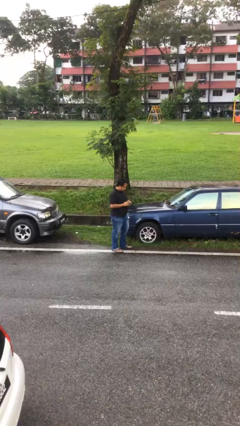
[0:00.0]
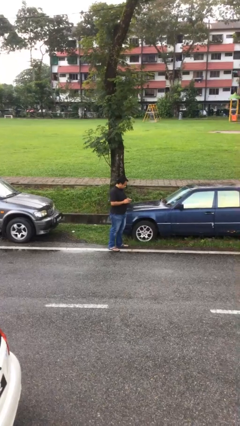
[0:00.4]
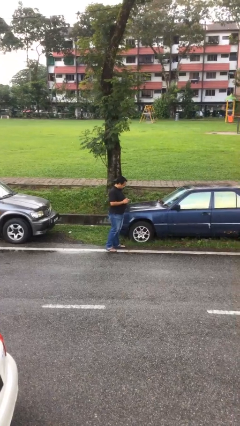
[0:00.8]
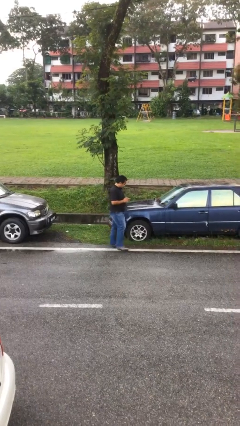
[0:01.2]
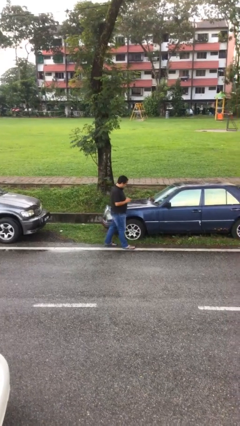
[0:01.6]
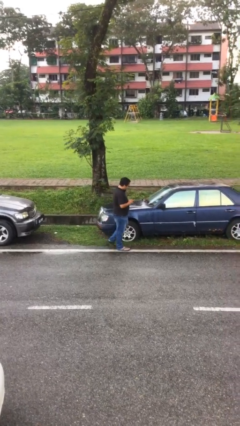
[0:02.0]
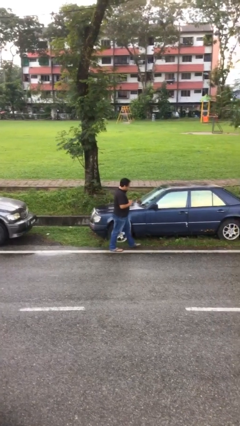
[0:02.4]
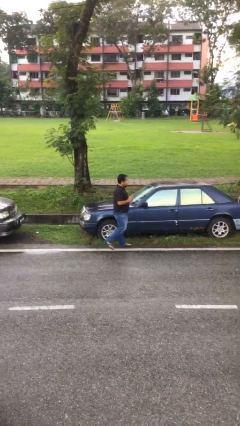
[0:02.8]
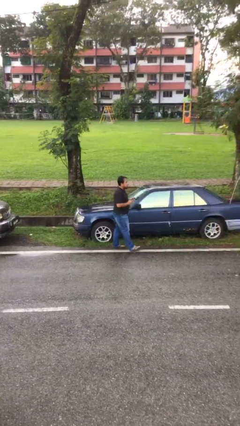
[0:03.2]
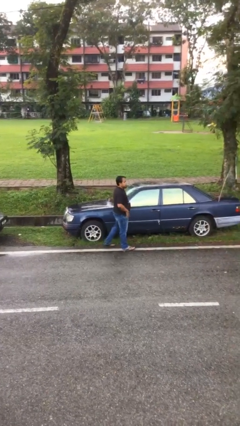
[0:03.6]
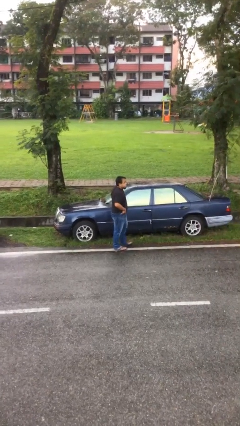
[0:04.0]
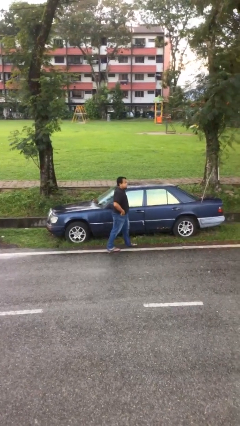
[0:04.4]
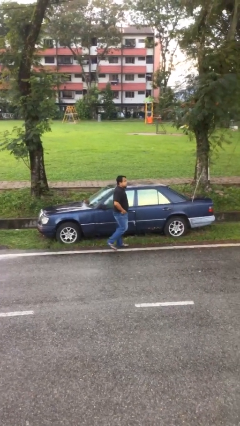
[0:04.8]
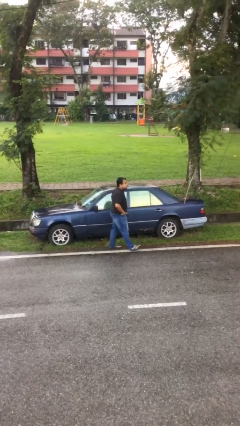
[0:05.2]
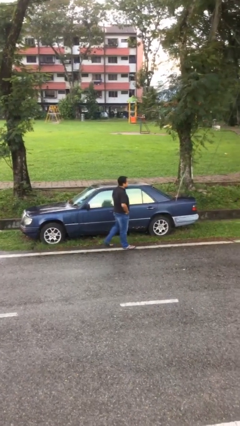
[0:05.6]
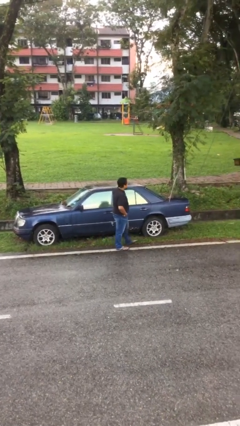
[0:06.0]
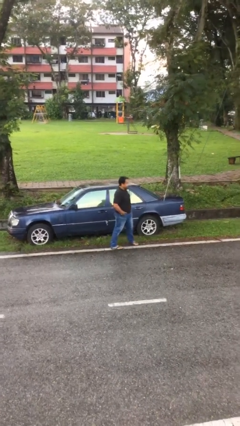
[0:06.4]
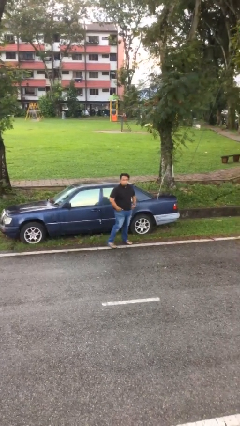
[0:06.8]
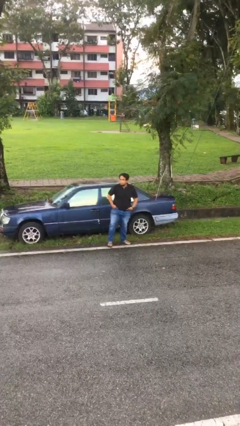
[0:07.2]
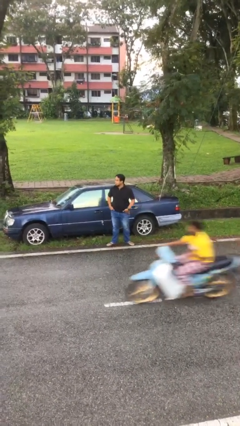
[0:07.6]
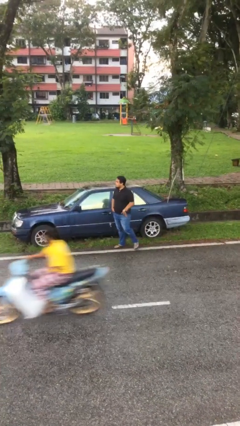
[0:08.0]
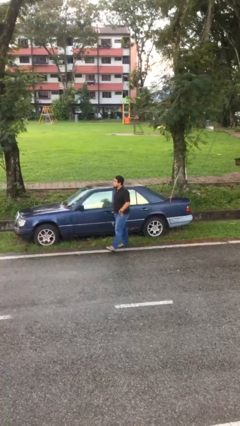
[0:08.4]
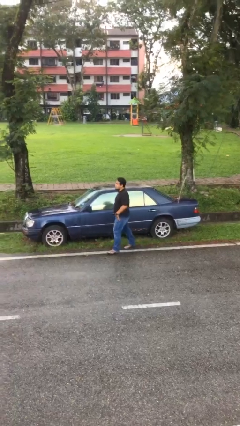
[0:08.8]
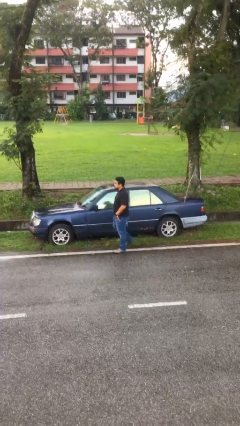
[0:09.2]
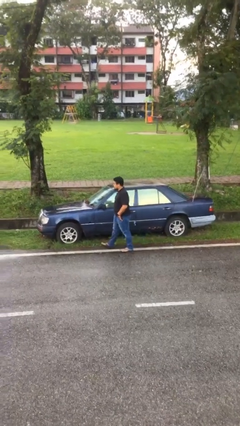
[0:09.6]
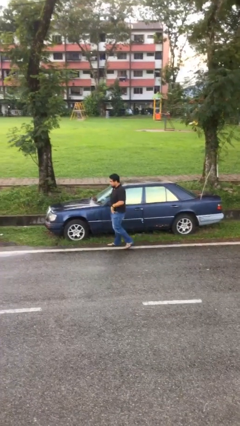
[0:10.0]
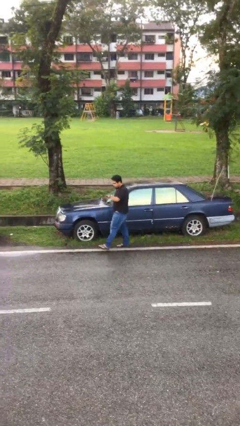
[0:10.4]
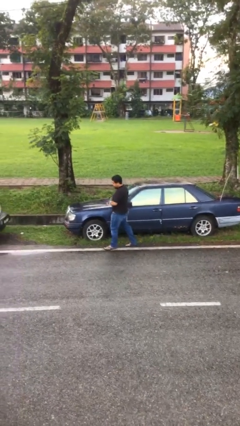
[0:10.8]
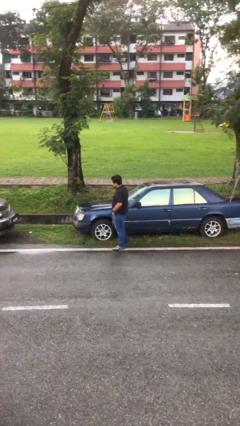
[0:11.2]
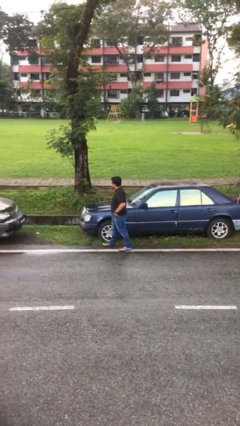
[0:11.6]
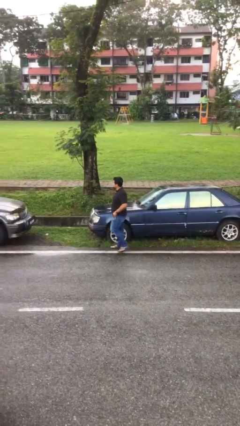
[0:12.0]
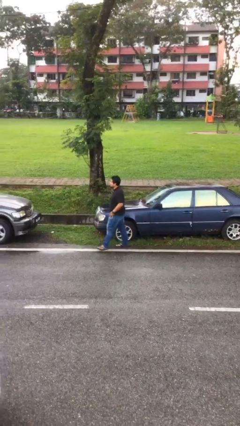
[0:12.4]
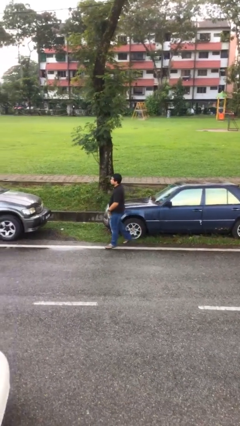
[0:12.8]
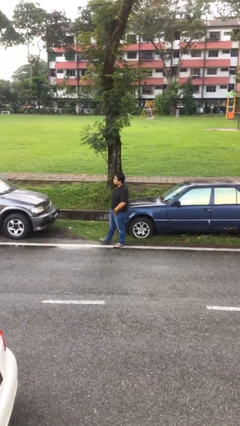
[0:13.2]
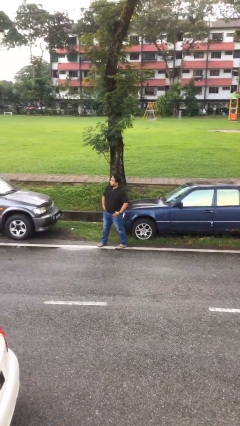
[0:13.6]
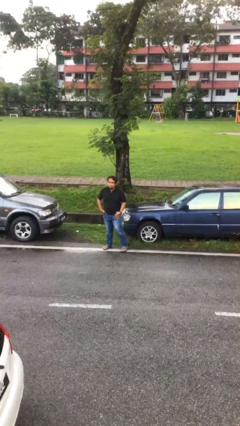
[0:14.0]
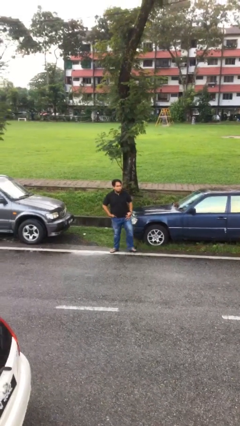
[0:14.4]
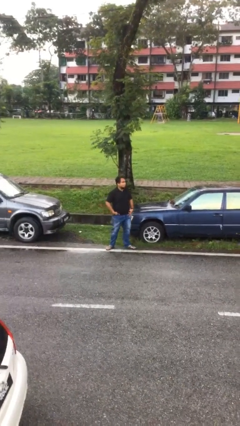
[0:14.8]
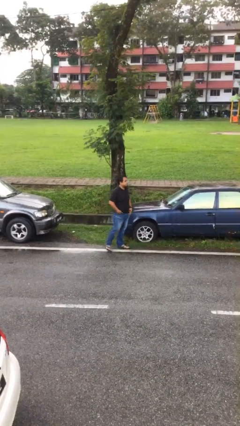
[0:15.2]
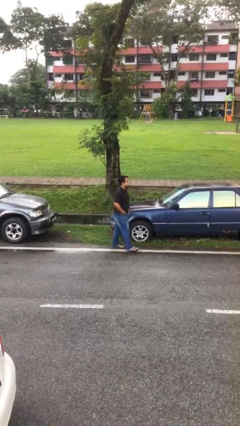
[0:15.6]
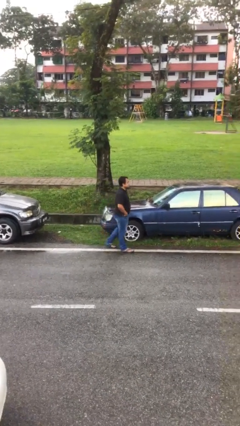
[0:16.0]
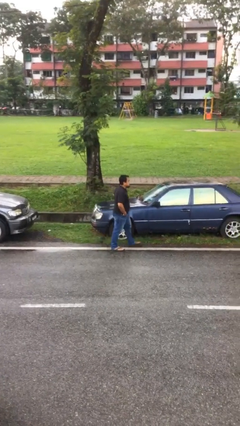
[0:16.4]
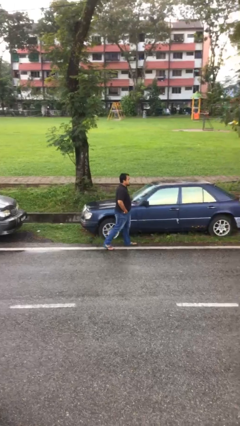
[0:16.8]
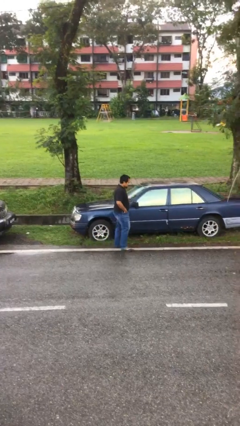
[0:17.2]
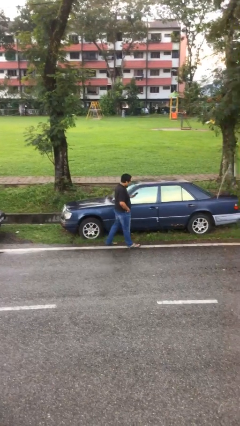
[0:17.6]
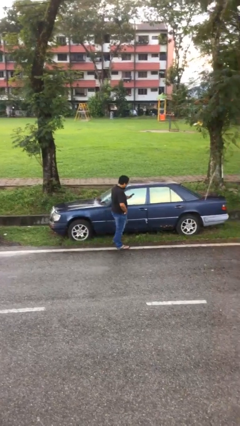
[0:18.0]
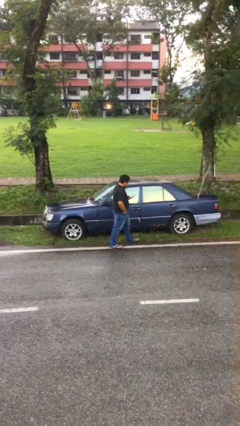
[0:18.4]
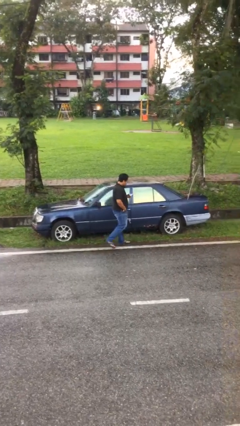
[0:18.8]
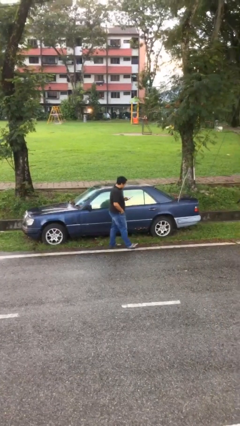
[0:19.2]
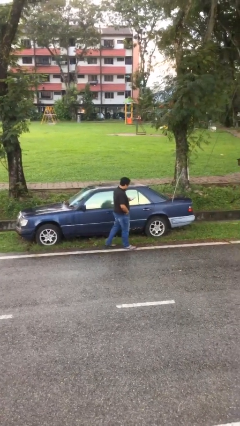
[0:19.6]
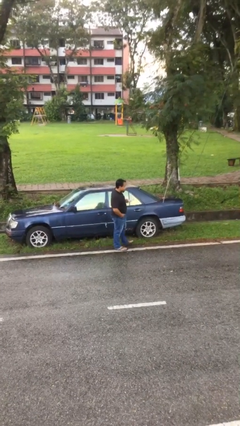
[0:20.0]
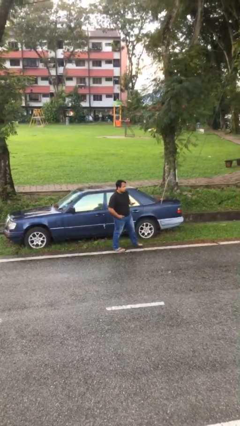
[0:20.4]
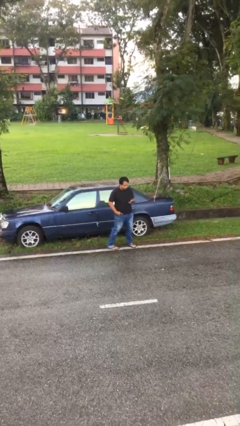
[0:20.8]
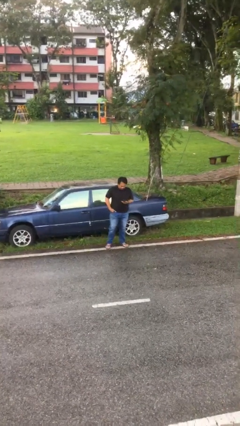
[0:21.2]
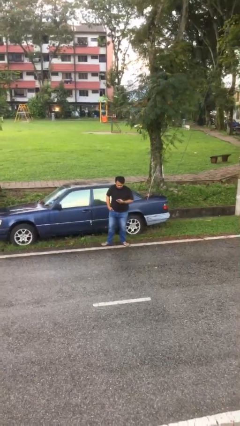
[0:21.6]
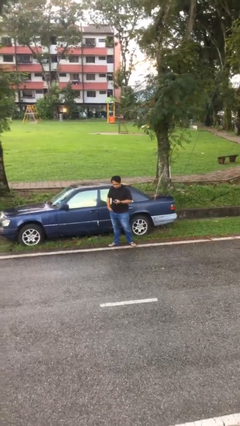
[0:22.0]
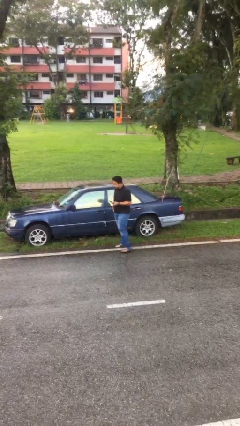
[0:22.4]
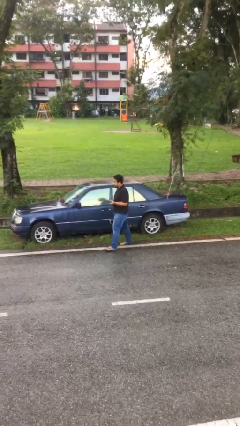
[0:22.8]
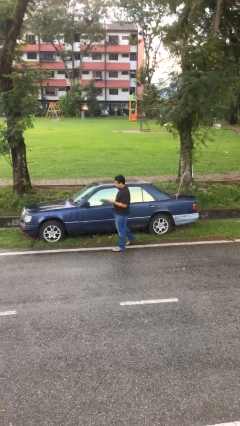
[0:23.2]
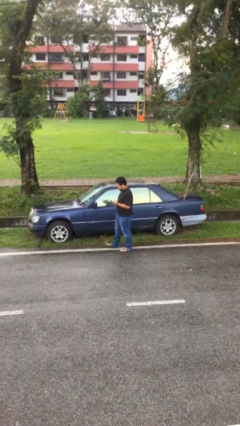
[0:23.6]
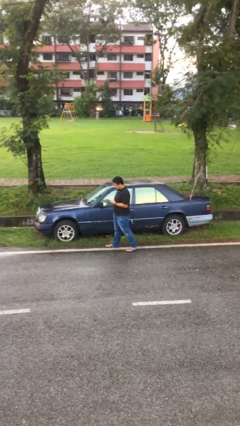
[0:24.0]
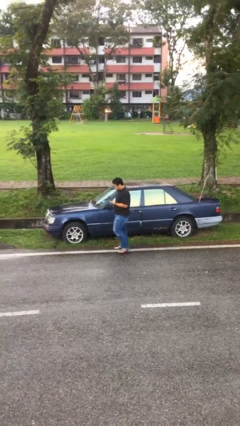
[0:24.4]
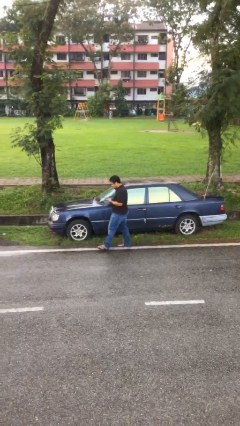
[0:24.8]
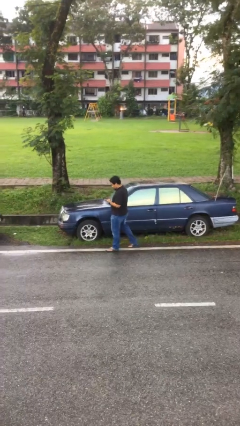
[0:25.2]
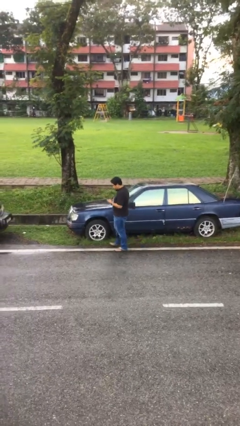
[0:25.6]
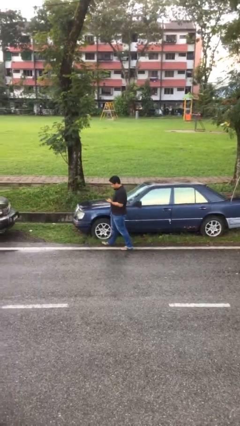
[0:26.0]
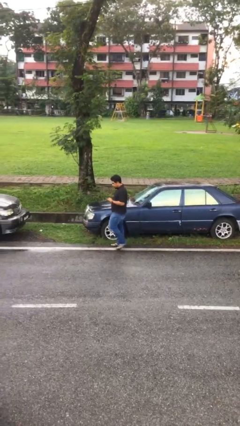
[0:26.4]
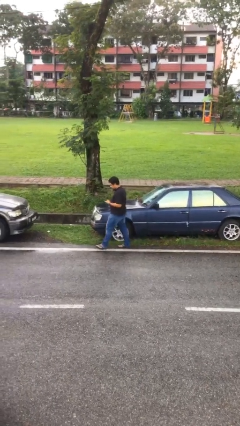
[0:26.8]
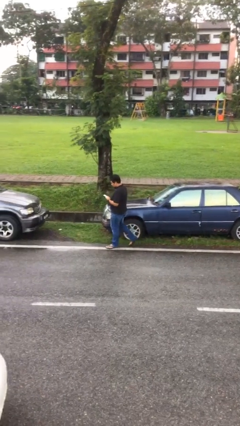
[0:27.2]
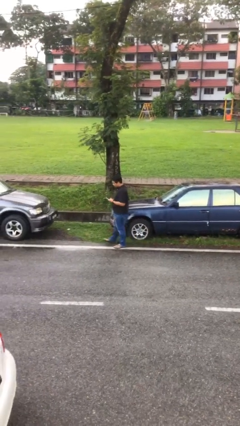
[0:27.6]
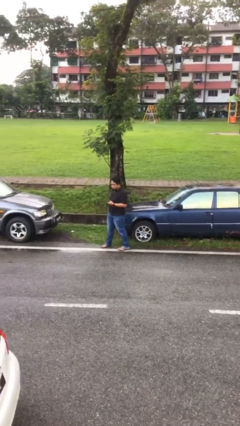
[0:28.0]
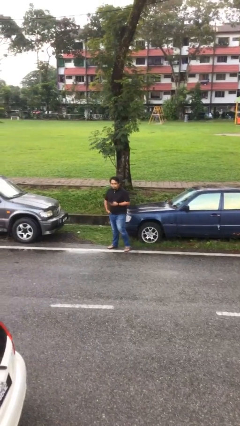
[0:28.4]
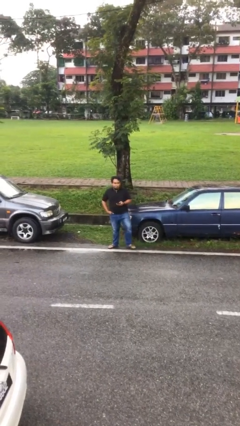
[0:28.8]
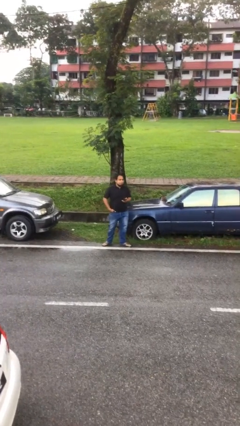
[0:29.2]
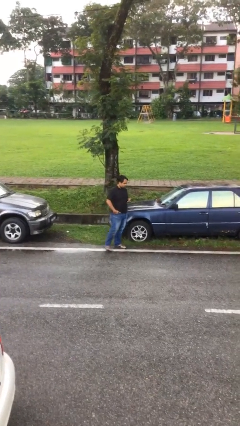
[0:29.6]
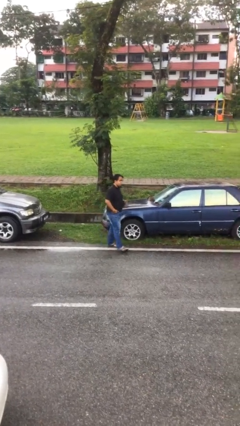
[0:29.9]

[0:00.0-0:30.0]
person walks

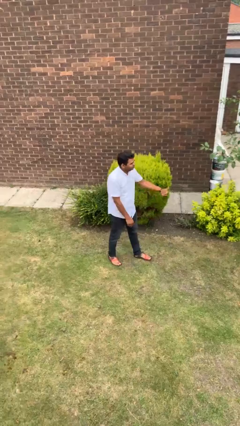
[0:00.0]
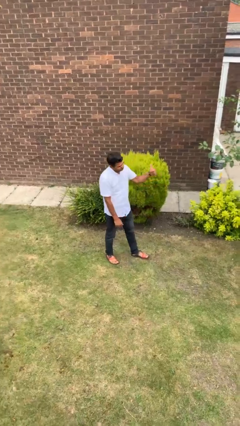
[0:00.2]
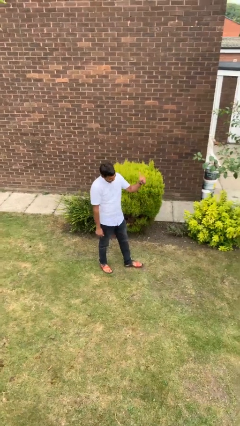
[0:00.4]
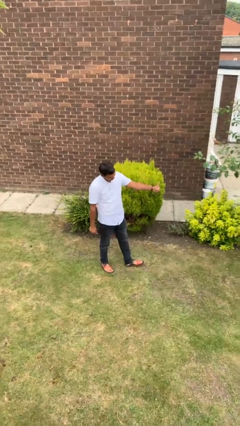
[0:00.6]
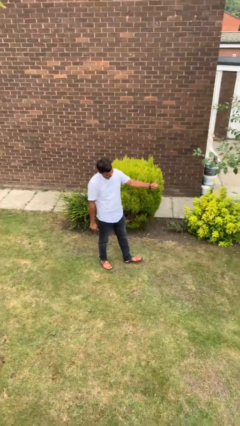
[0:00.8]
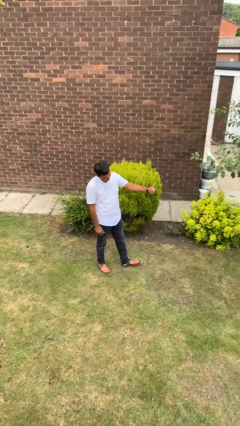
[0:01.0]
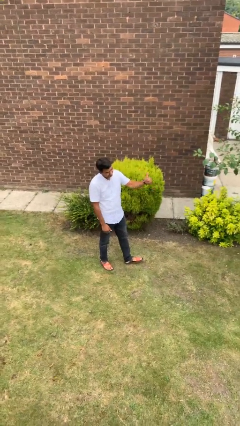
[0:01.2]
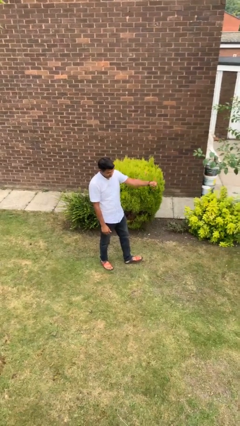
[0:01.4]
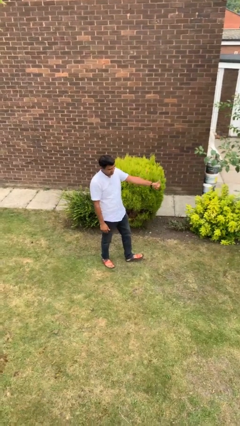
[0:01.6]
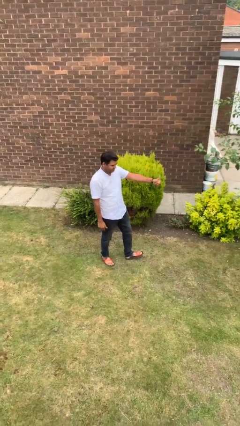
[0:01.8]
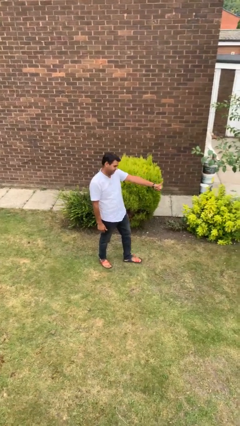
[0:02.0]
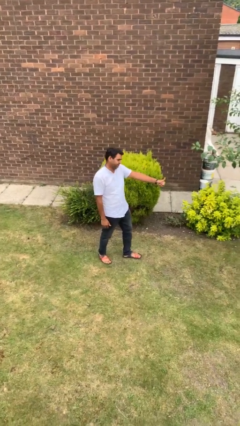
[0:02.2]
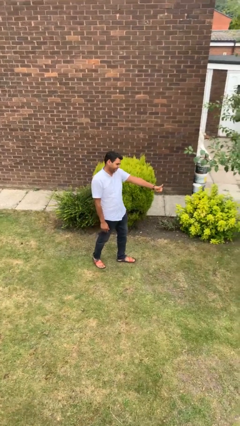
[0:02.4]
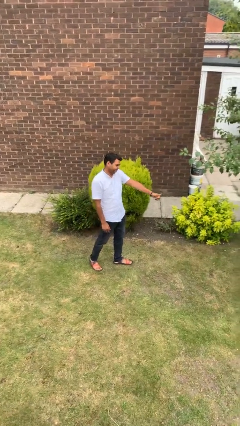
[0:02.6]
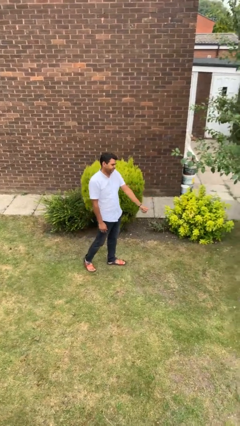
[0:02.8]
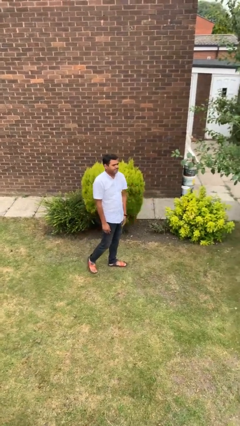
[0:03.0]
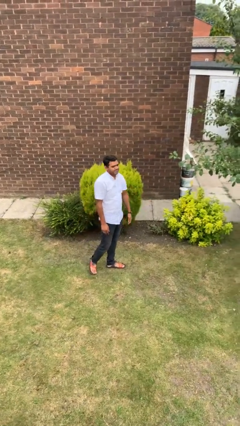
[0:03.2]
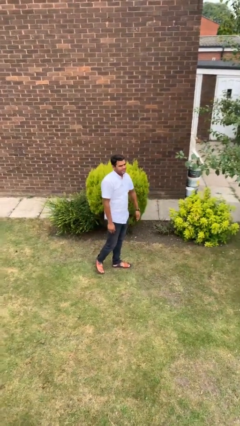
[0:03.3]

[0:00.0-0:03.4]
person gestures thumbs up

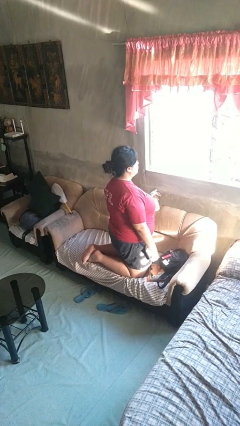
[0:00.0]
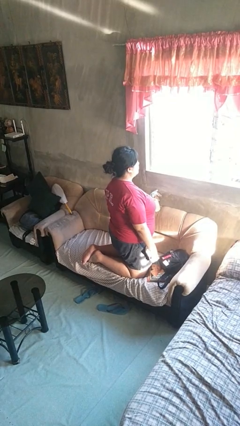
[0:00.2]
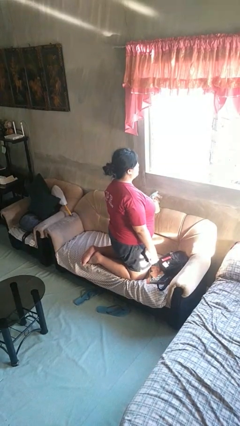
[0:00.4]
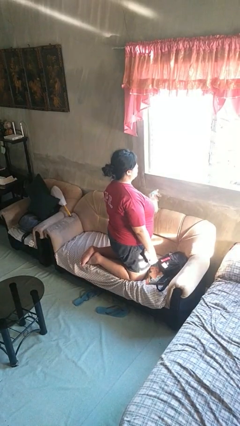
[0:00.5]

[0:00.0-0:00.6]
person sprays from bottle
